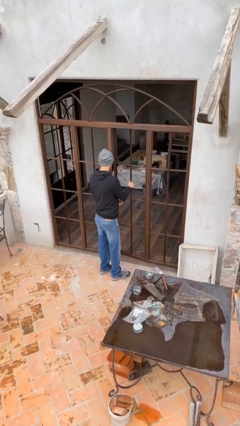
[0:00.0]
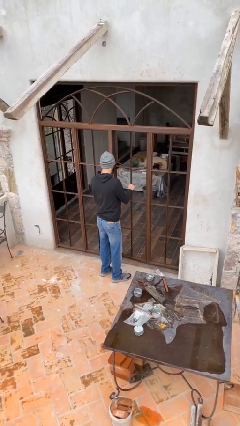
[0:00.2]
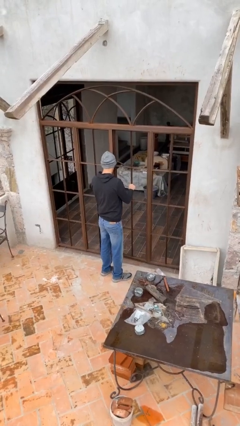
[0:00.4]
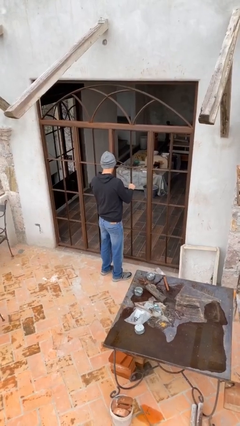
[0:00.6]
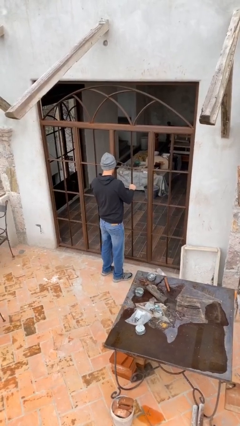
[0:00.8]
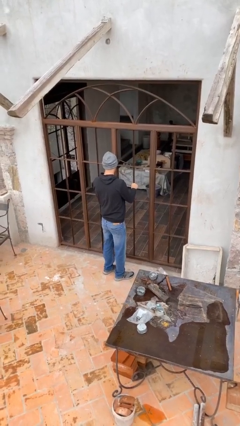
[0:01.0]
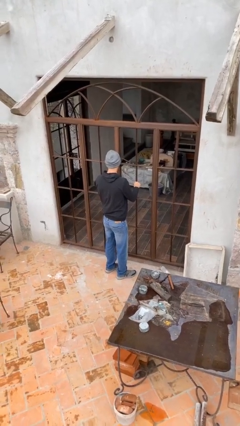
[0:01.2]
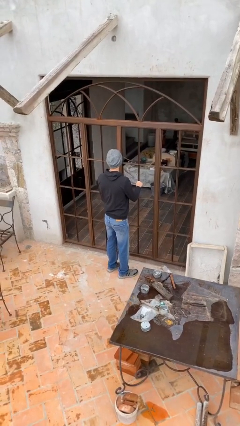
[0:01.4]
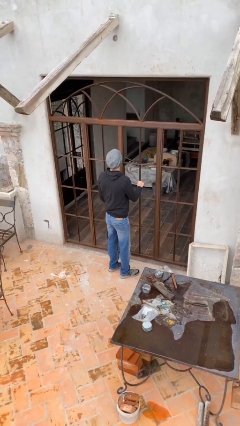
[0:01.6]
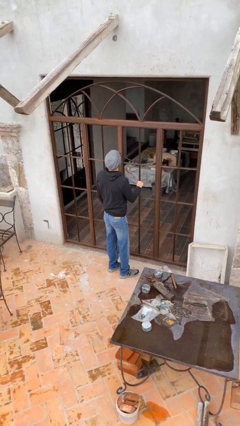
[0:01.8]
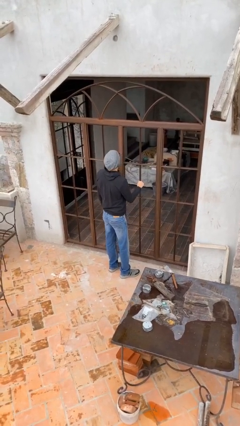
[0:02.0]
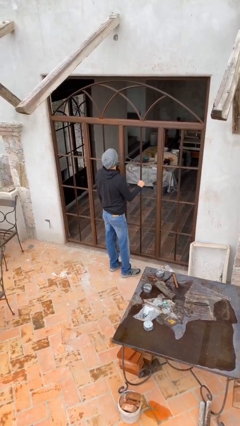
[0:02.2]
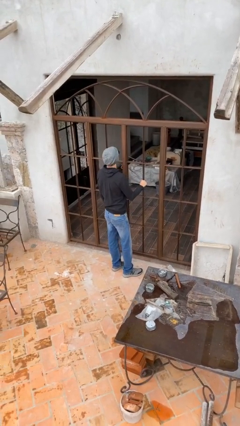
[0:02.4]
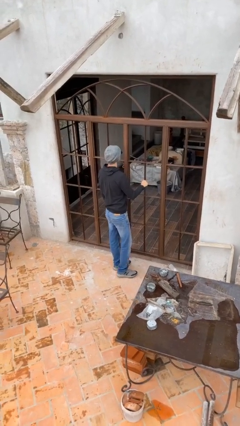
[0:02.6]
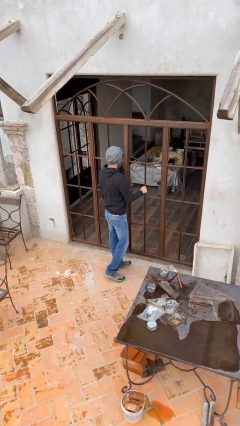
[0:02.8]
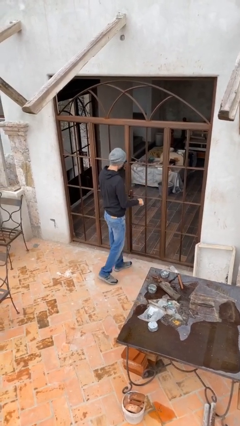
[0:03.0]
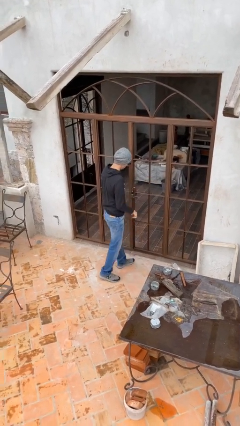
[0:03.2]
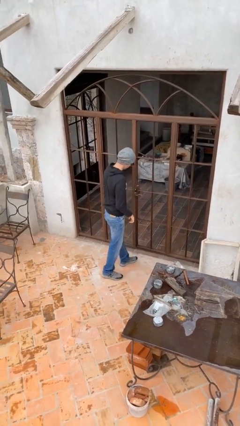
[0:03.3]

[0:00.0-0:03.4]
person closes facility door

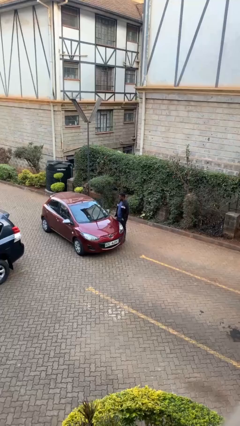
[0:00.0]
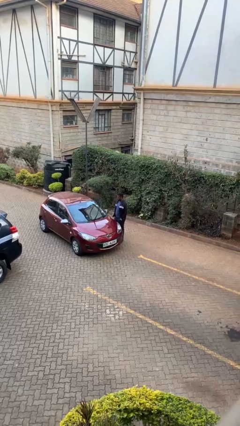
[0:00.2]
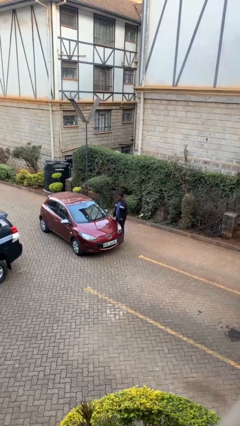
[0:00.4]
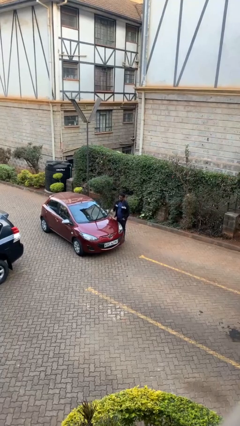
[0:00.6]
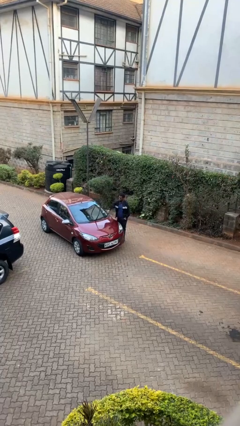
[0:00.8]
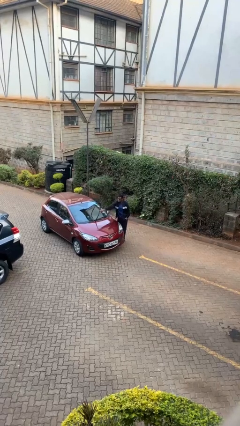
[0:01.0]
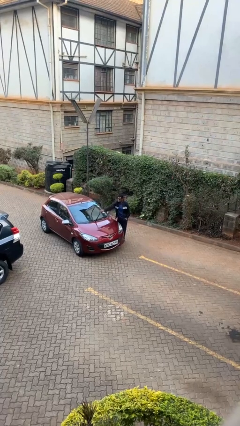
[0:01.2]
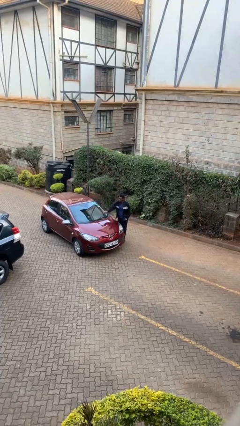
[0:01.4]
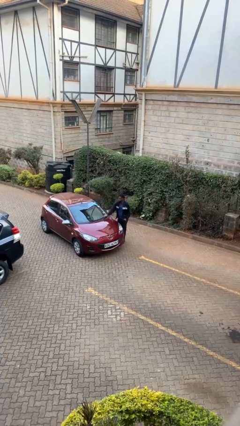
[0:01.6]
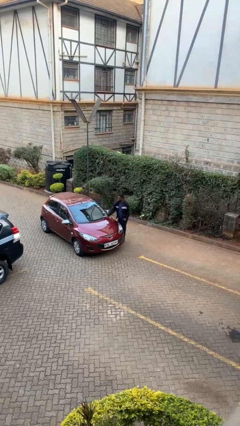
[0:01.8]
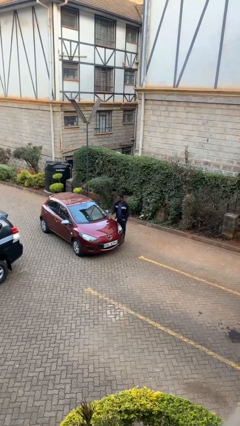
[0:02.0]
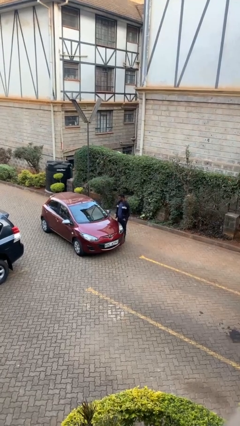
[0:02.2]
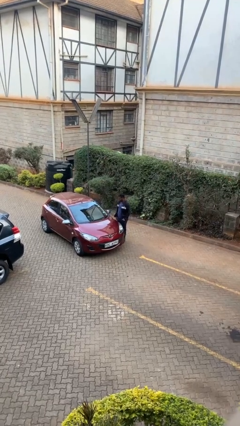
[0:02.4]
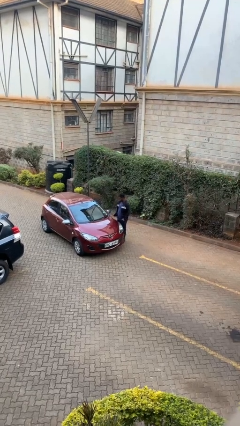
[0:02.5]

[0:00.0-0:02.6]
person flips down car wipers

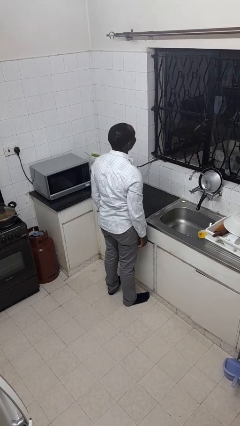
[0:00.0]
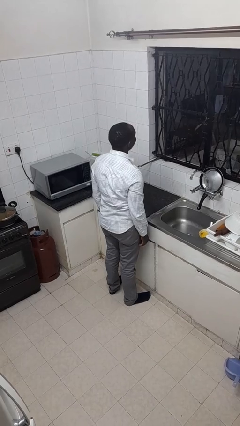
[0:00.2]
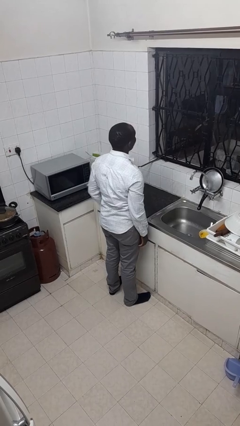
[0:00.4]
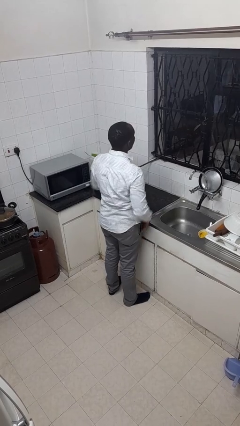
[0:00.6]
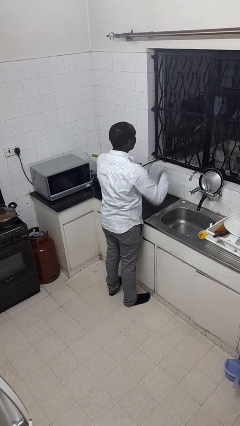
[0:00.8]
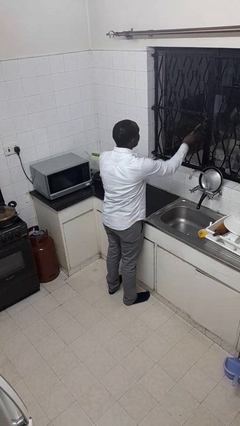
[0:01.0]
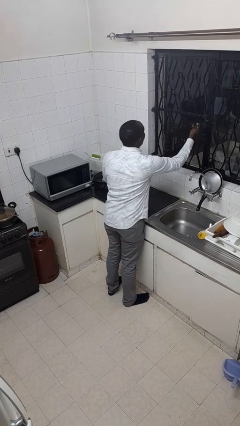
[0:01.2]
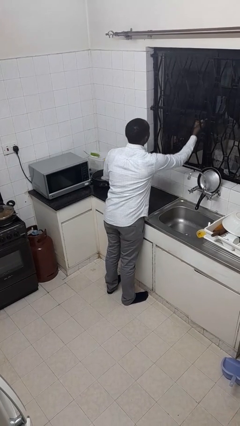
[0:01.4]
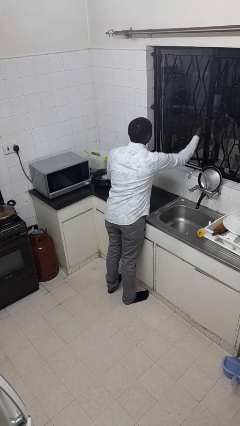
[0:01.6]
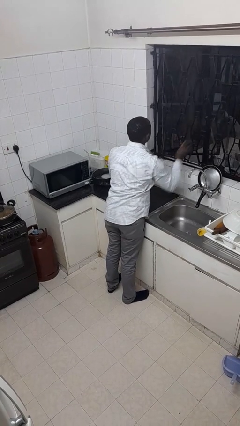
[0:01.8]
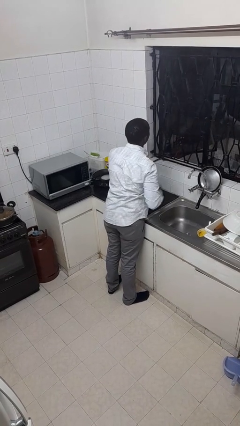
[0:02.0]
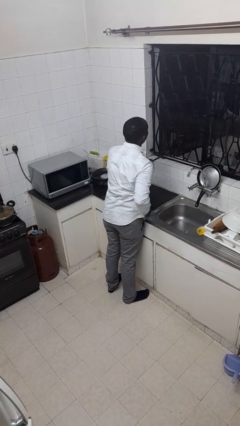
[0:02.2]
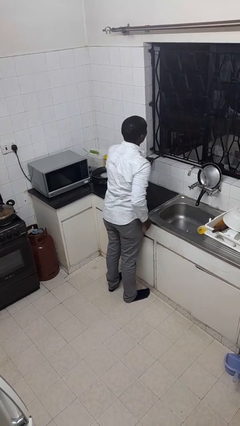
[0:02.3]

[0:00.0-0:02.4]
person opens home window

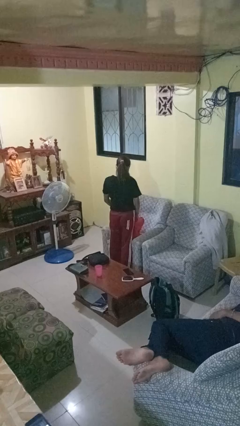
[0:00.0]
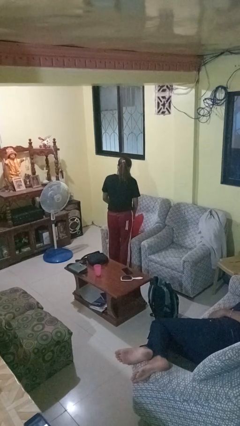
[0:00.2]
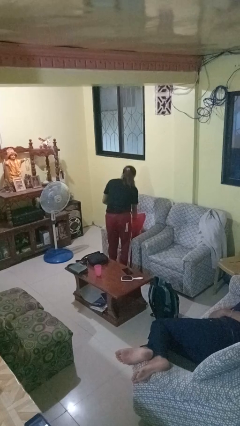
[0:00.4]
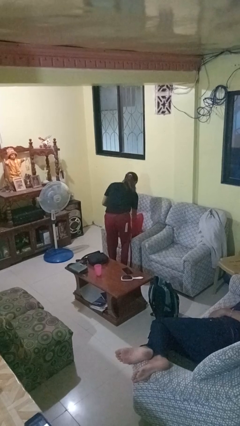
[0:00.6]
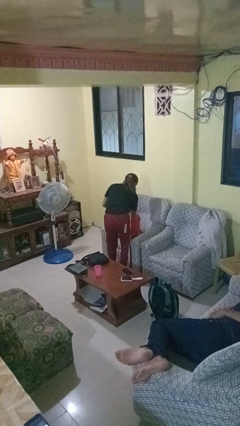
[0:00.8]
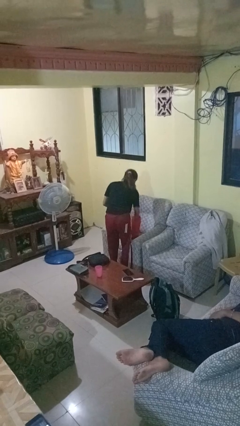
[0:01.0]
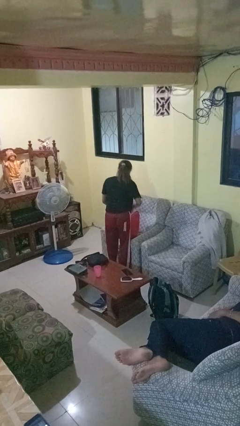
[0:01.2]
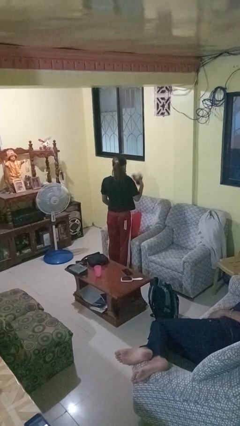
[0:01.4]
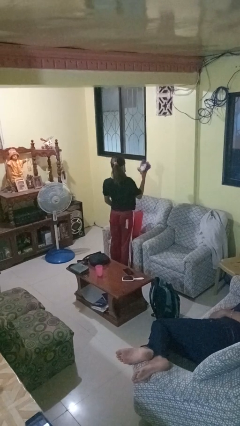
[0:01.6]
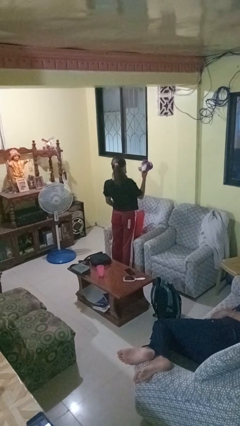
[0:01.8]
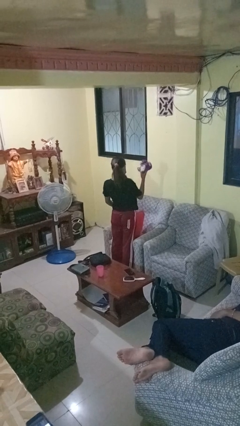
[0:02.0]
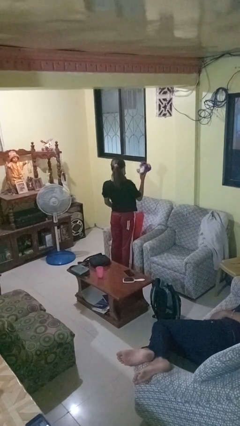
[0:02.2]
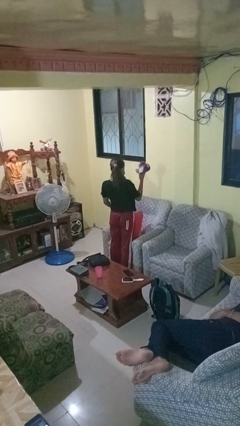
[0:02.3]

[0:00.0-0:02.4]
person takes object from bag

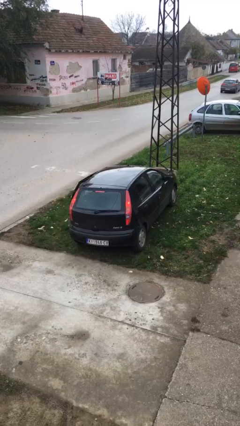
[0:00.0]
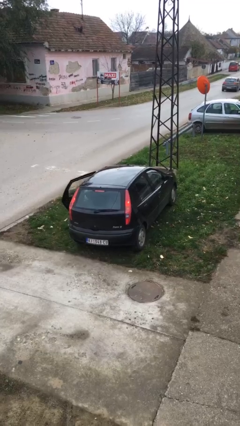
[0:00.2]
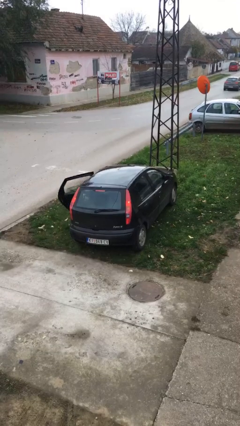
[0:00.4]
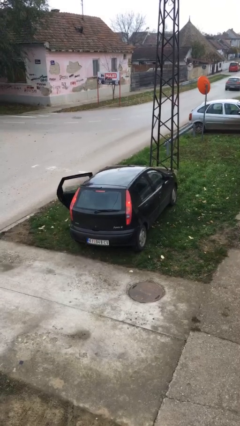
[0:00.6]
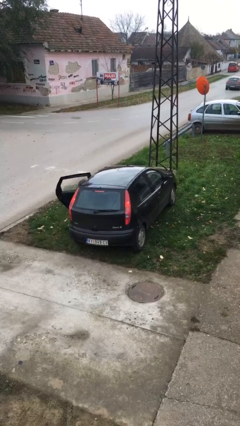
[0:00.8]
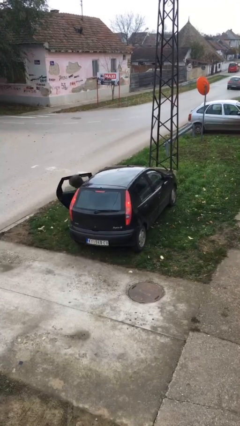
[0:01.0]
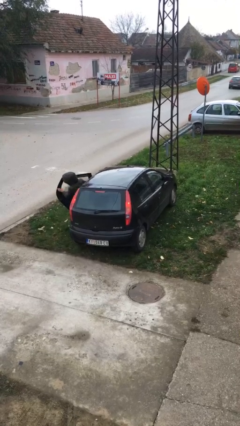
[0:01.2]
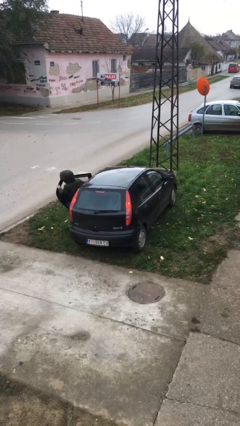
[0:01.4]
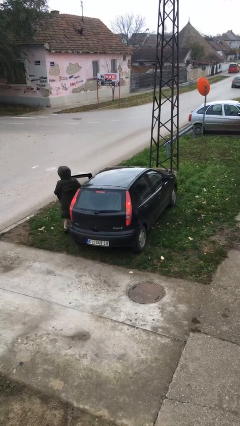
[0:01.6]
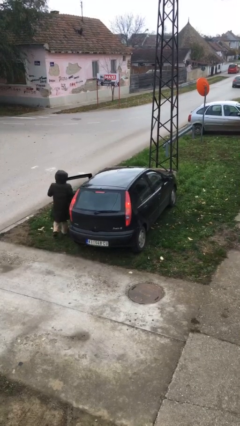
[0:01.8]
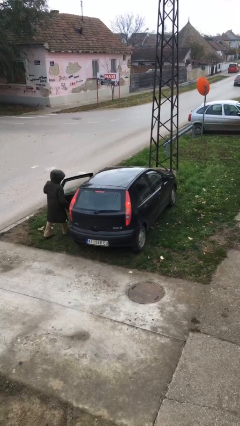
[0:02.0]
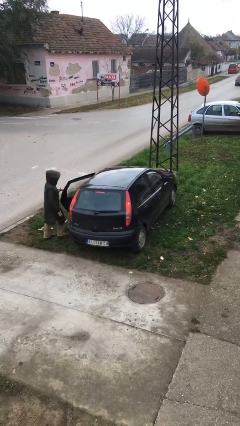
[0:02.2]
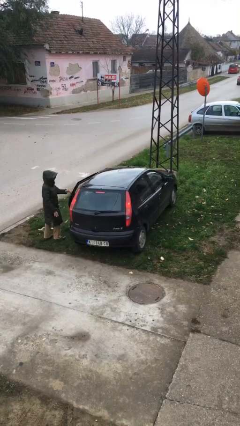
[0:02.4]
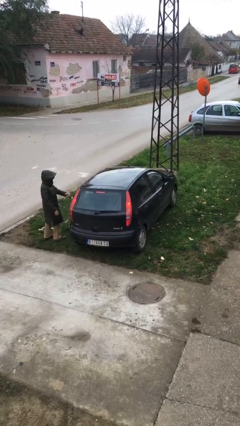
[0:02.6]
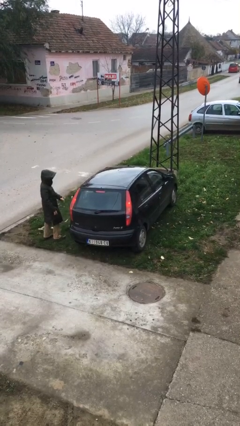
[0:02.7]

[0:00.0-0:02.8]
car drops off person

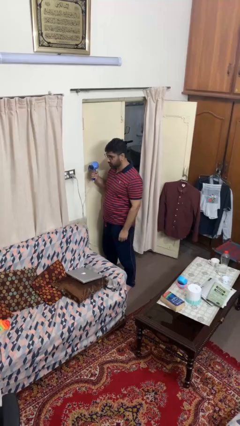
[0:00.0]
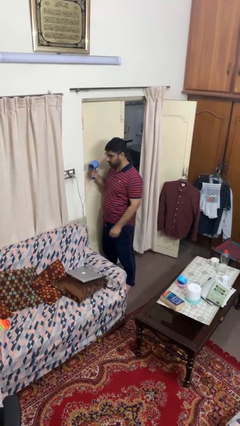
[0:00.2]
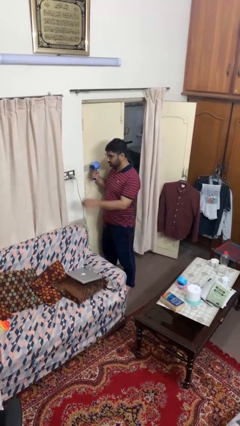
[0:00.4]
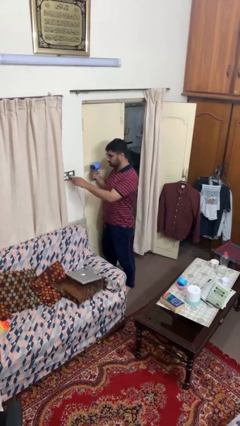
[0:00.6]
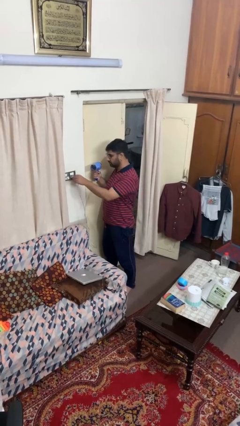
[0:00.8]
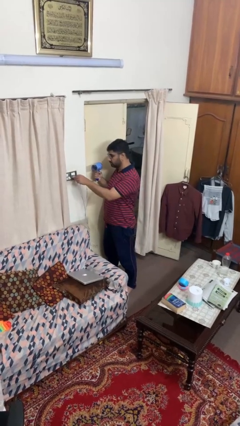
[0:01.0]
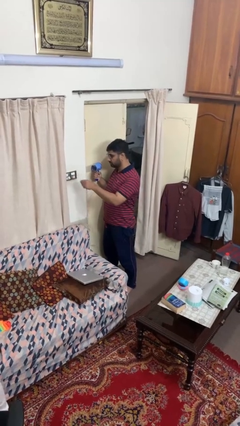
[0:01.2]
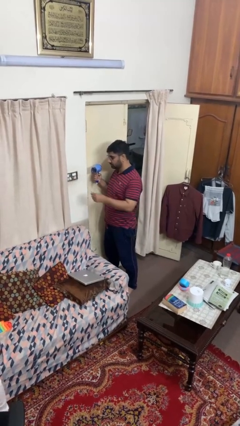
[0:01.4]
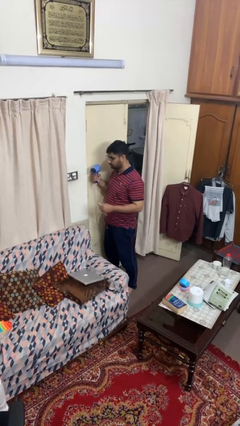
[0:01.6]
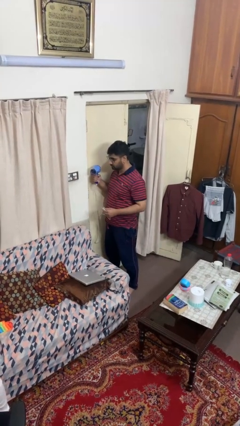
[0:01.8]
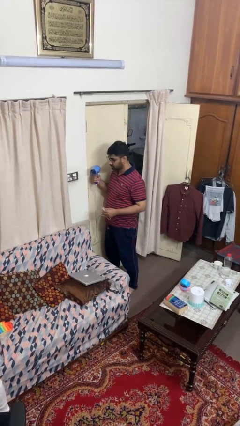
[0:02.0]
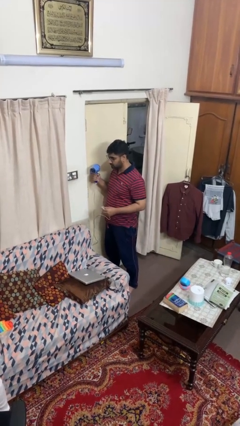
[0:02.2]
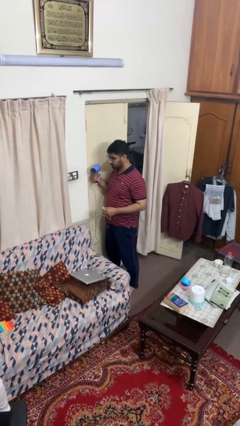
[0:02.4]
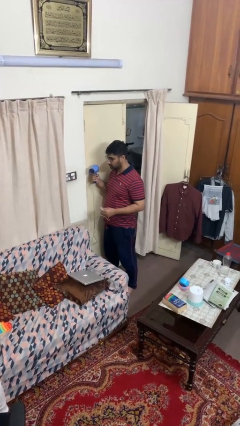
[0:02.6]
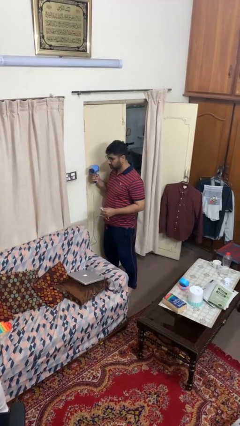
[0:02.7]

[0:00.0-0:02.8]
person unplugs from electrical socket

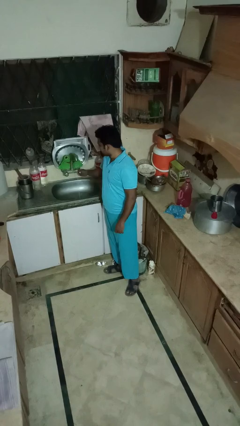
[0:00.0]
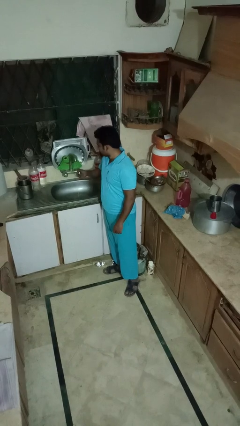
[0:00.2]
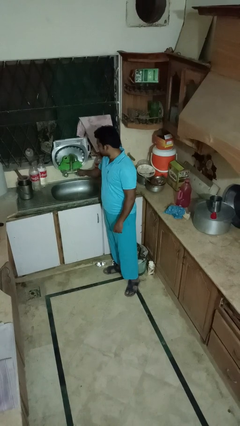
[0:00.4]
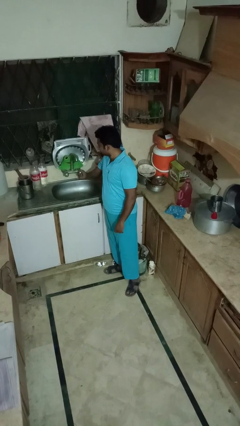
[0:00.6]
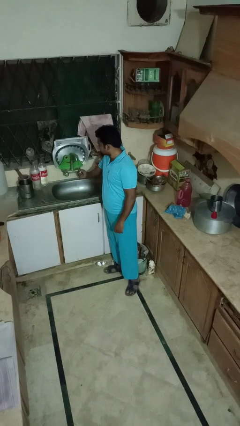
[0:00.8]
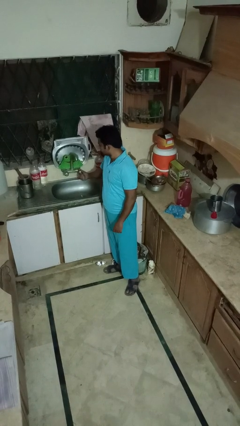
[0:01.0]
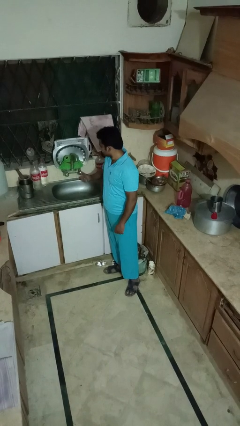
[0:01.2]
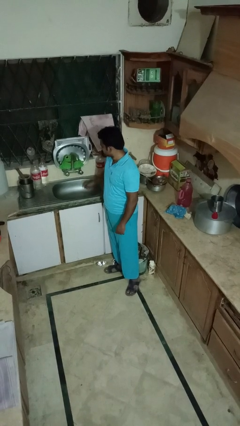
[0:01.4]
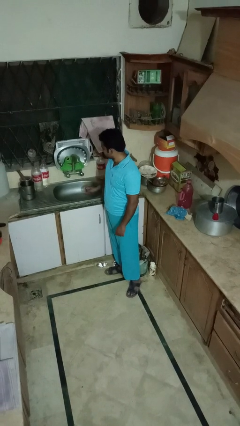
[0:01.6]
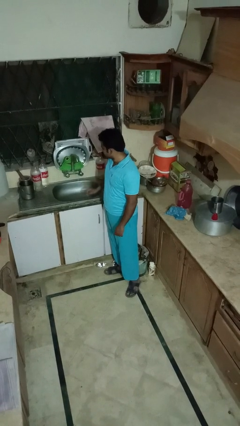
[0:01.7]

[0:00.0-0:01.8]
person turns off faucet
